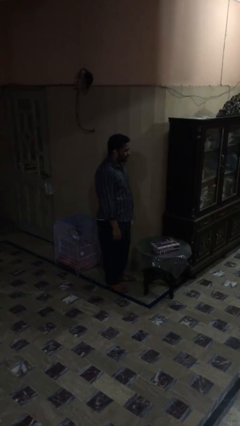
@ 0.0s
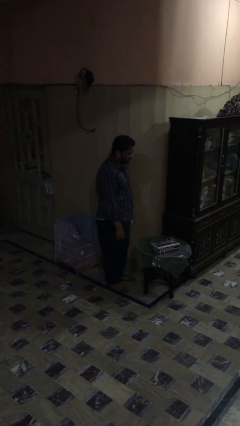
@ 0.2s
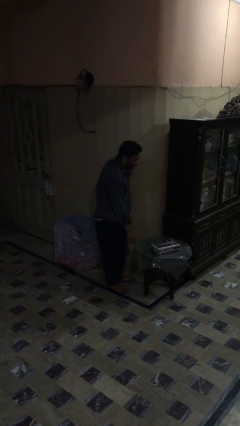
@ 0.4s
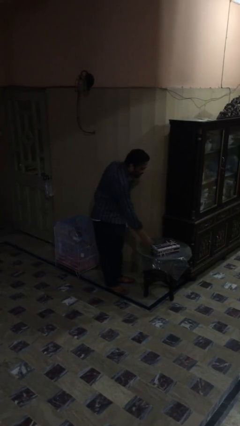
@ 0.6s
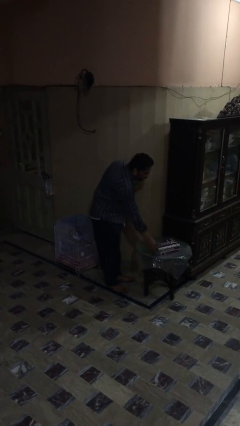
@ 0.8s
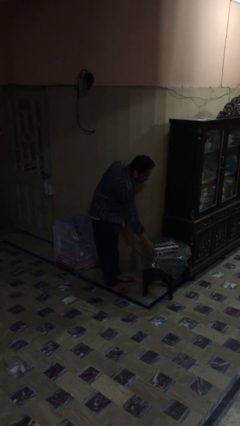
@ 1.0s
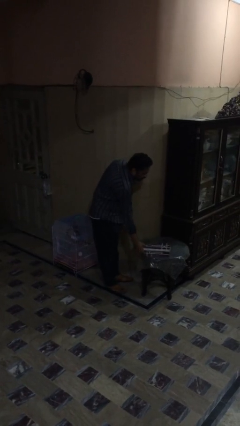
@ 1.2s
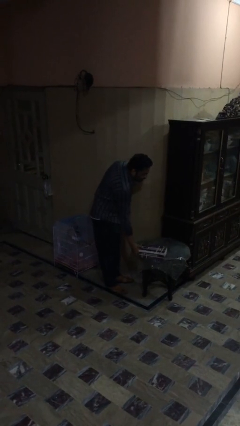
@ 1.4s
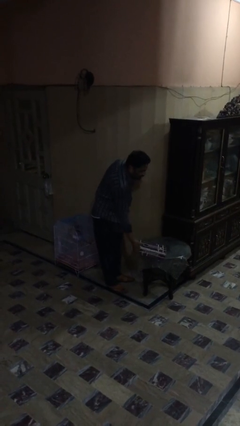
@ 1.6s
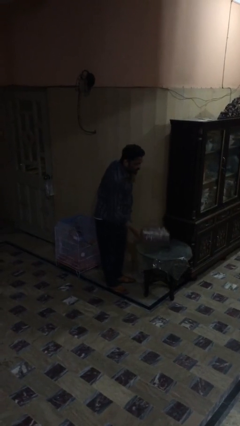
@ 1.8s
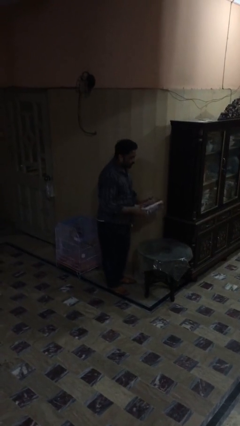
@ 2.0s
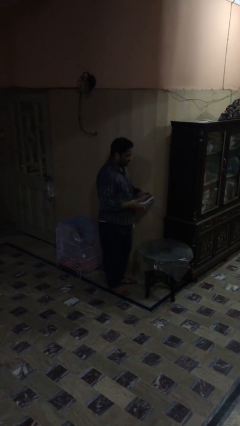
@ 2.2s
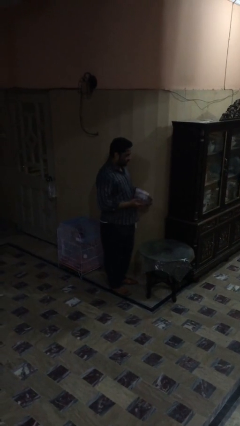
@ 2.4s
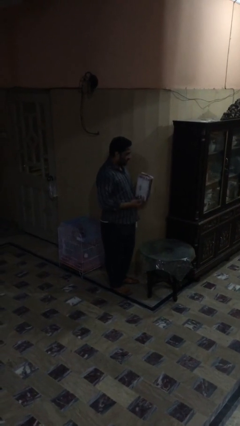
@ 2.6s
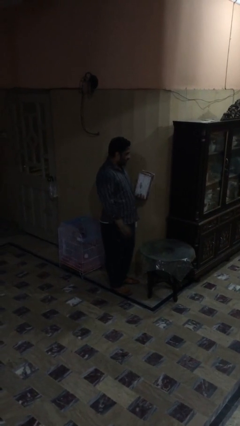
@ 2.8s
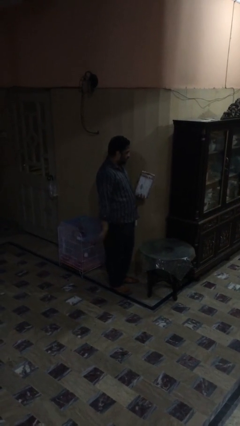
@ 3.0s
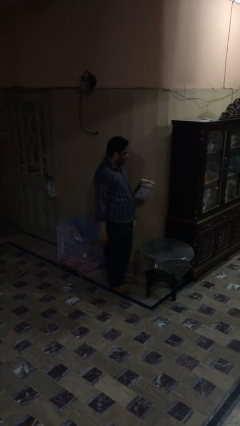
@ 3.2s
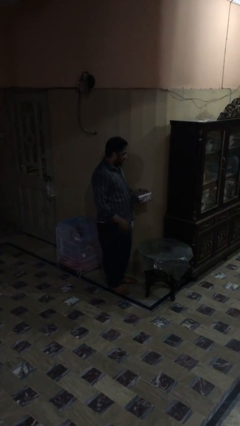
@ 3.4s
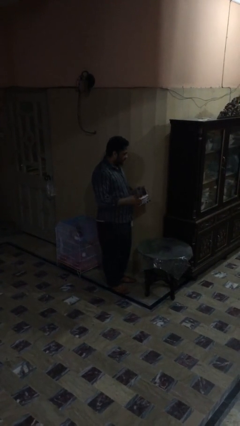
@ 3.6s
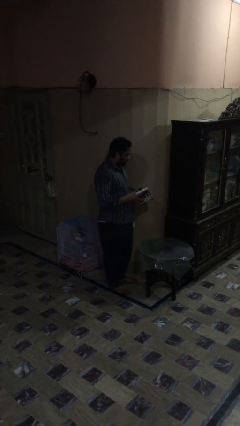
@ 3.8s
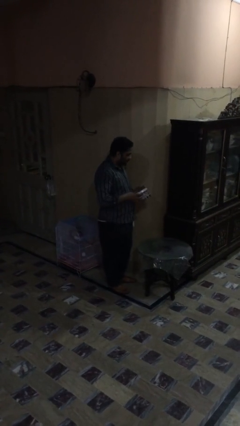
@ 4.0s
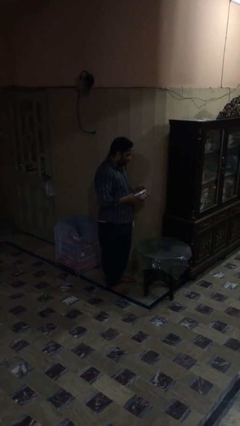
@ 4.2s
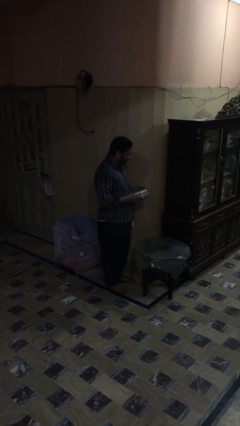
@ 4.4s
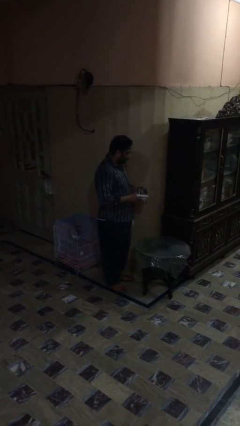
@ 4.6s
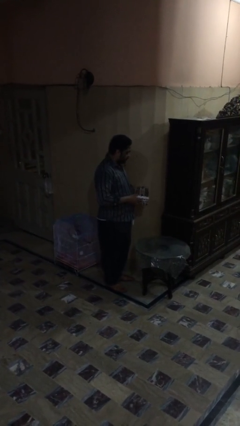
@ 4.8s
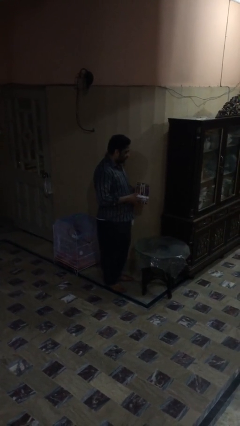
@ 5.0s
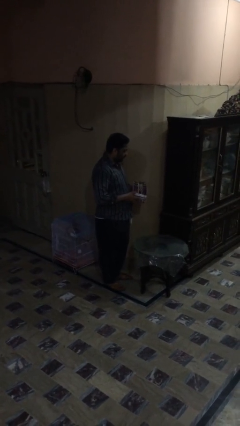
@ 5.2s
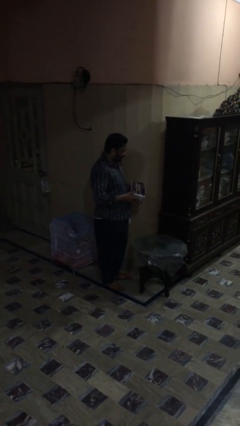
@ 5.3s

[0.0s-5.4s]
person picks up object from table

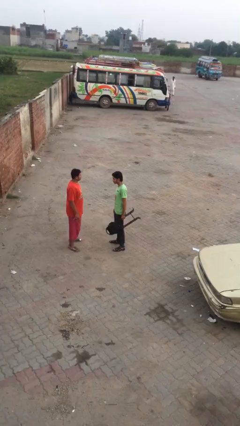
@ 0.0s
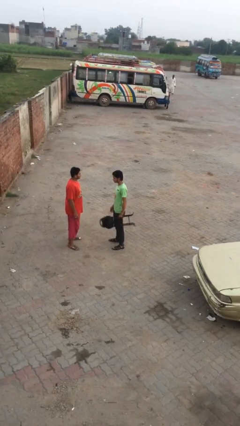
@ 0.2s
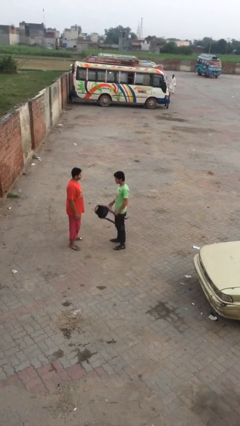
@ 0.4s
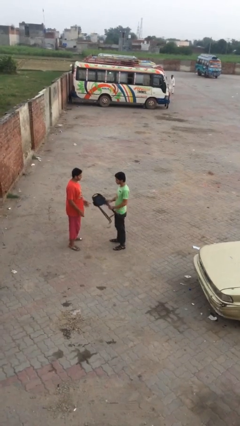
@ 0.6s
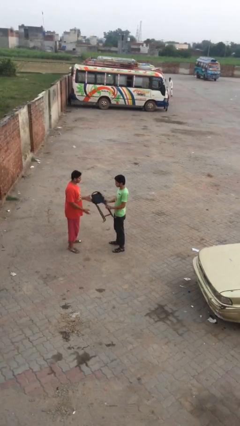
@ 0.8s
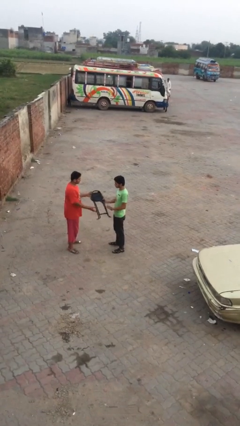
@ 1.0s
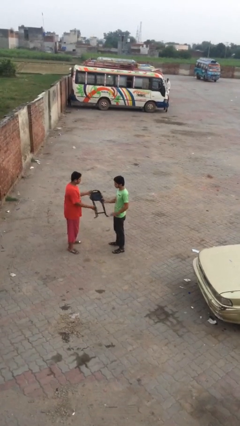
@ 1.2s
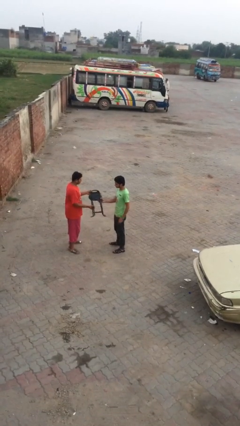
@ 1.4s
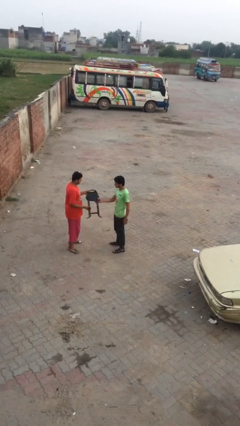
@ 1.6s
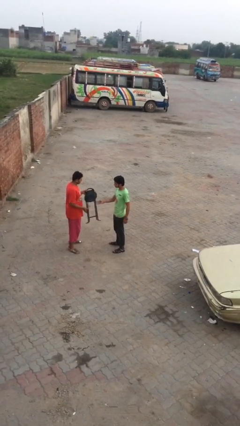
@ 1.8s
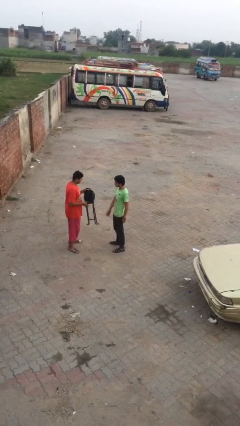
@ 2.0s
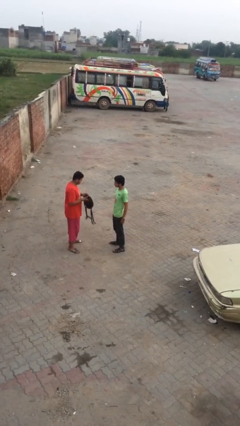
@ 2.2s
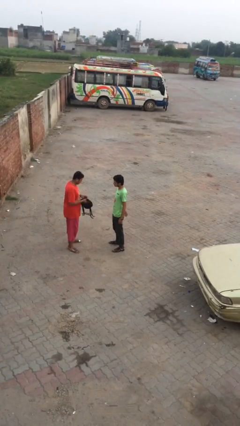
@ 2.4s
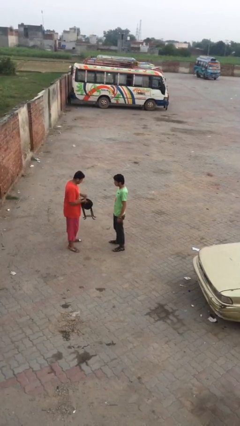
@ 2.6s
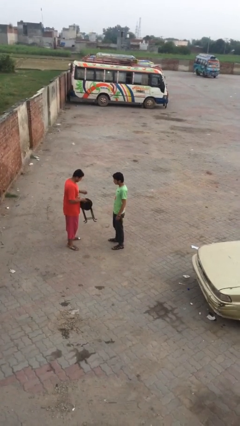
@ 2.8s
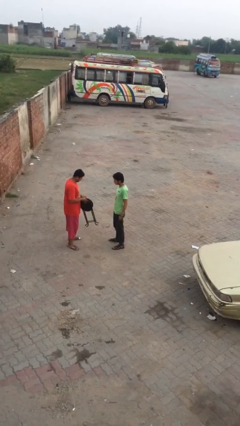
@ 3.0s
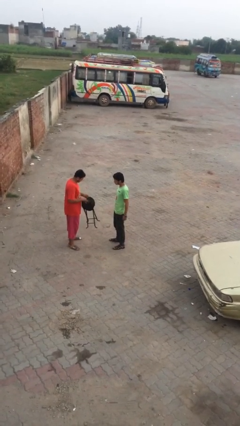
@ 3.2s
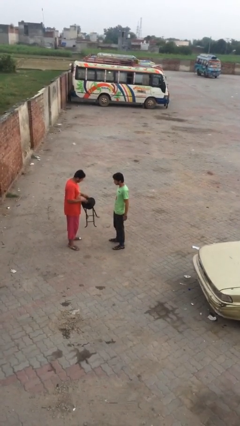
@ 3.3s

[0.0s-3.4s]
person transfers object to person

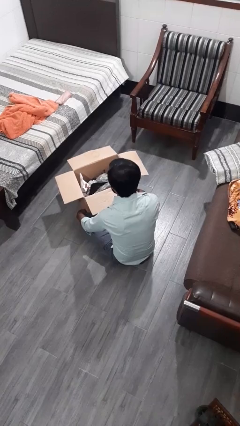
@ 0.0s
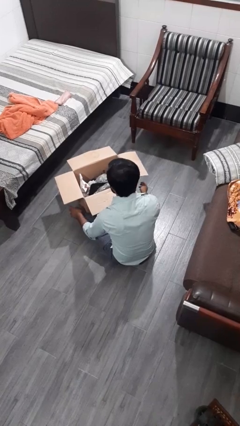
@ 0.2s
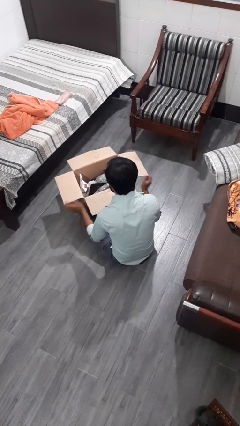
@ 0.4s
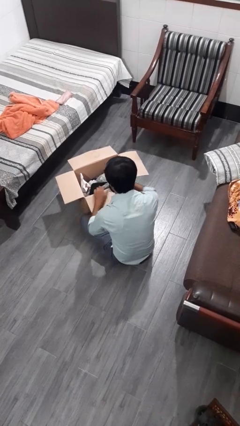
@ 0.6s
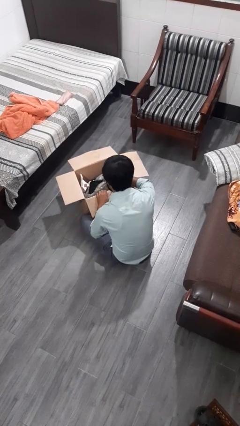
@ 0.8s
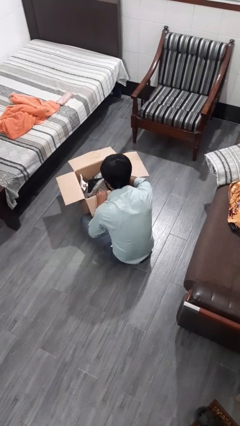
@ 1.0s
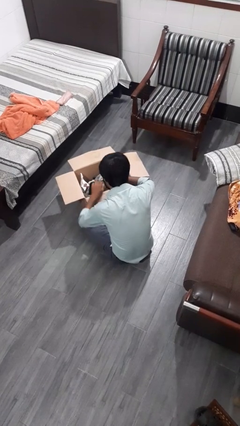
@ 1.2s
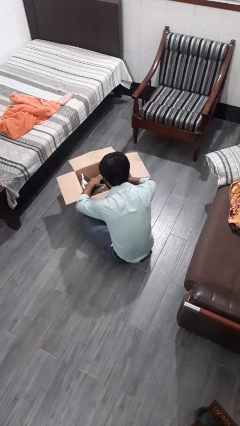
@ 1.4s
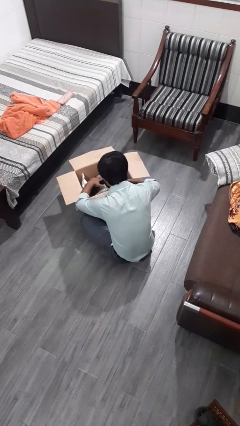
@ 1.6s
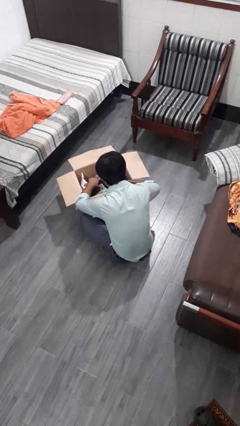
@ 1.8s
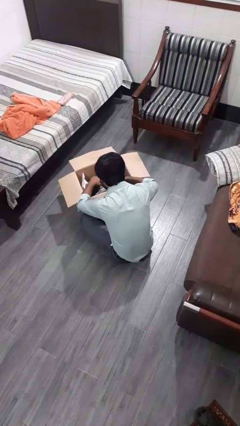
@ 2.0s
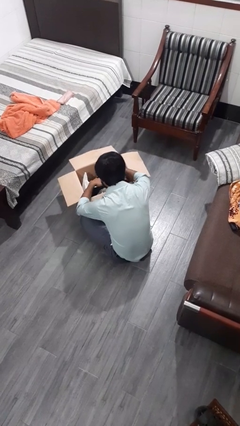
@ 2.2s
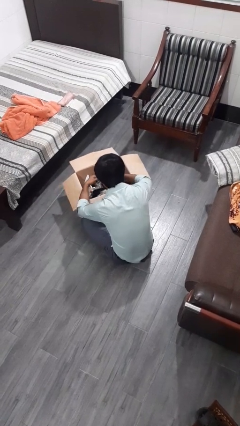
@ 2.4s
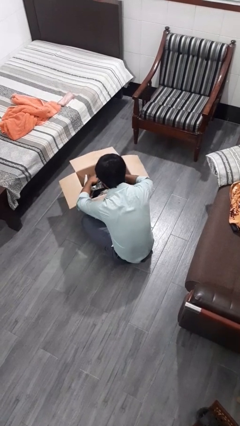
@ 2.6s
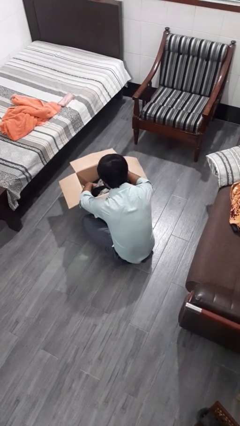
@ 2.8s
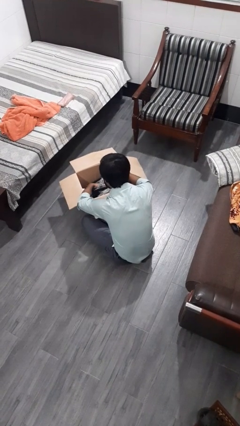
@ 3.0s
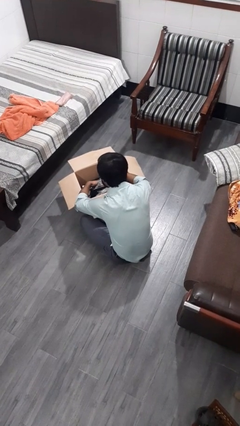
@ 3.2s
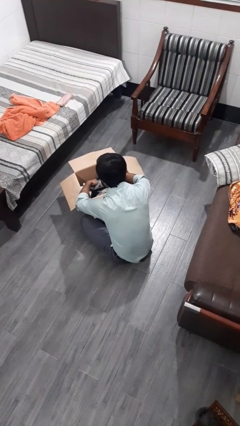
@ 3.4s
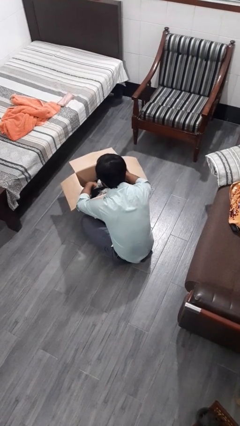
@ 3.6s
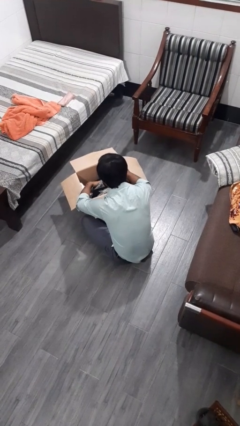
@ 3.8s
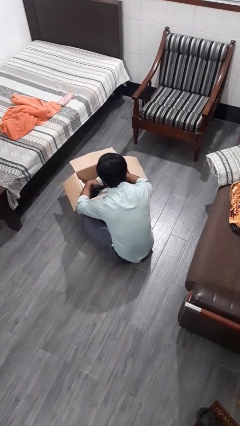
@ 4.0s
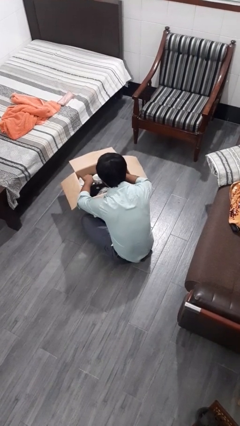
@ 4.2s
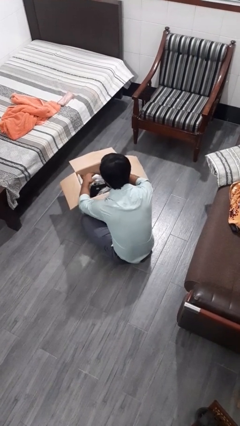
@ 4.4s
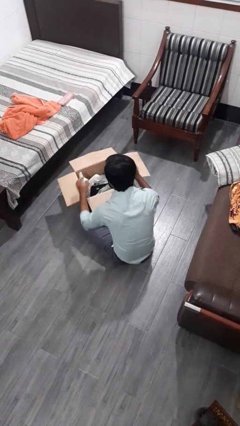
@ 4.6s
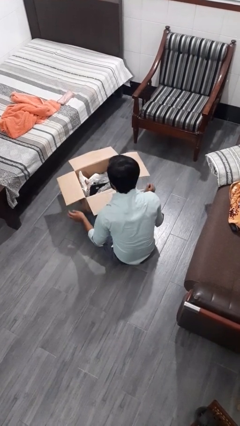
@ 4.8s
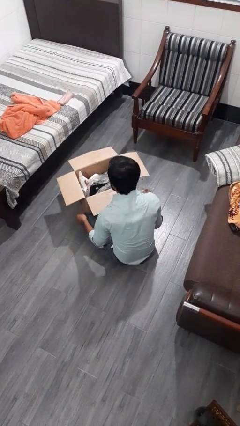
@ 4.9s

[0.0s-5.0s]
person searches in box

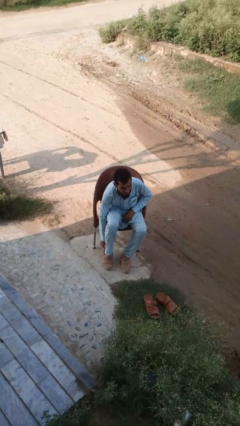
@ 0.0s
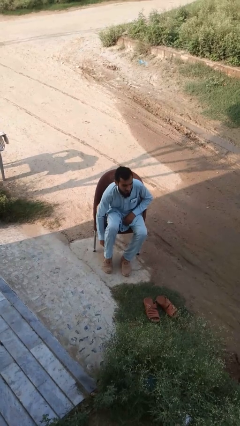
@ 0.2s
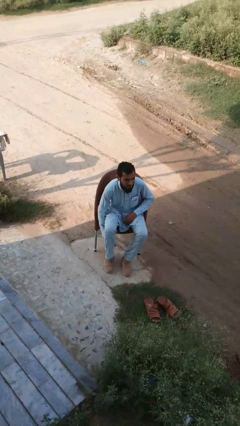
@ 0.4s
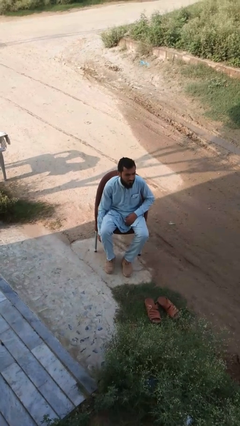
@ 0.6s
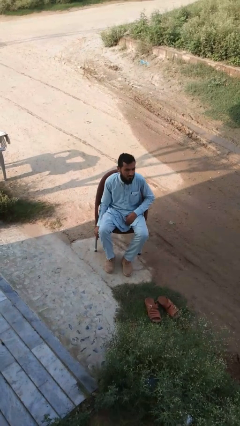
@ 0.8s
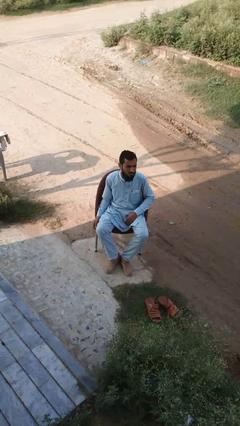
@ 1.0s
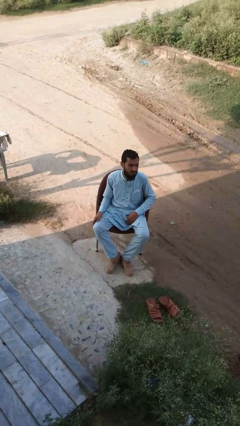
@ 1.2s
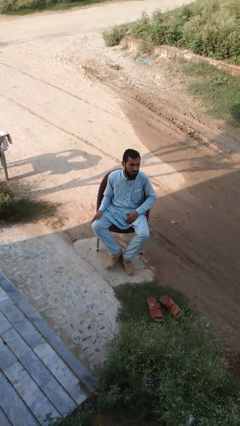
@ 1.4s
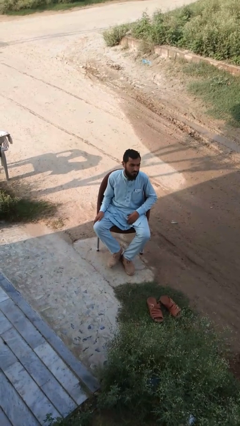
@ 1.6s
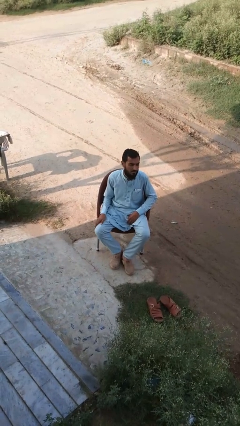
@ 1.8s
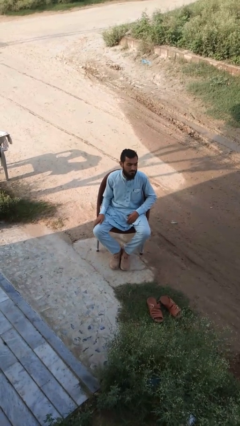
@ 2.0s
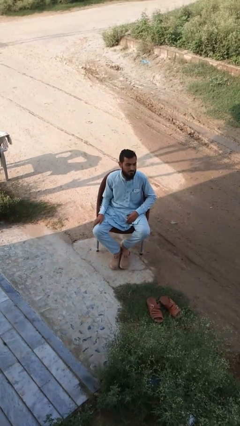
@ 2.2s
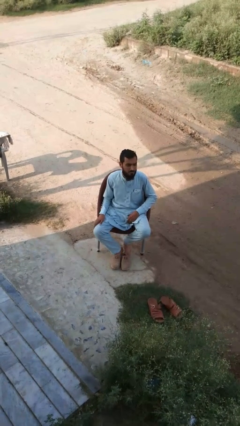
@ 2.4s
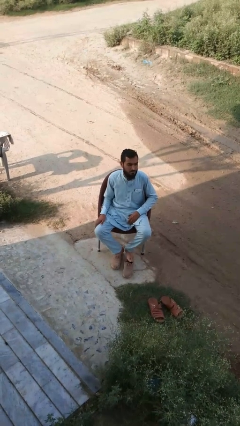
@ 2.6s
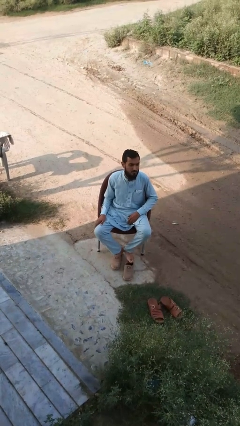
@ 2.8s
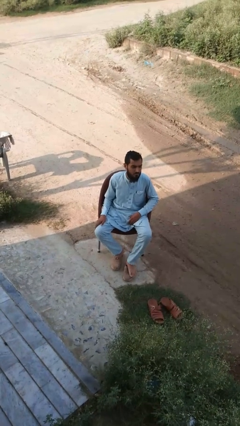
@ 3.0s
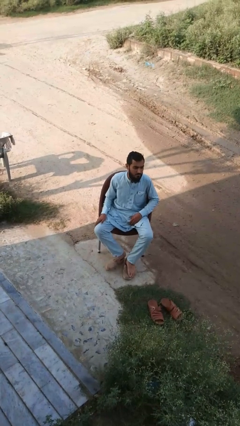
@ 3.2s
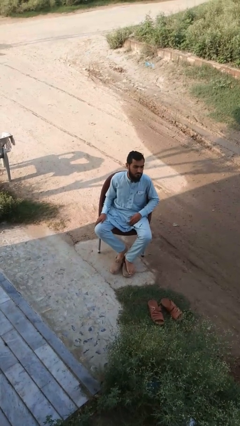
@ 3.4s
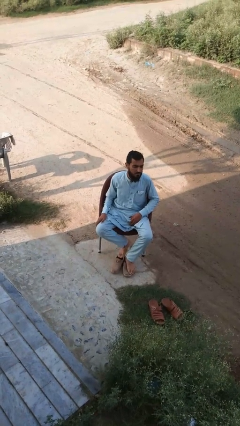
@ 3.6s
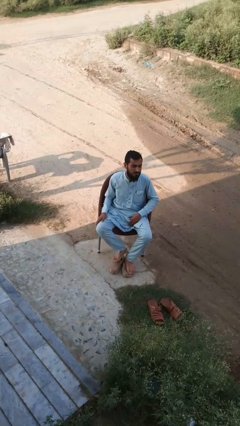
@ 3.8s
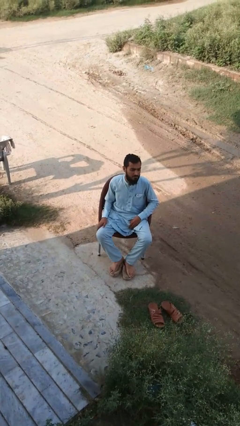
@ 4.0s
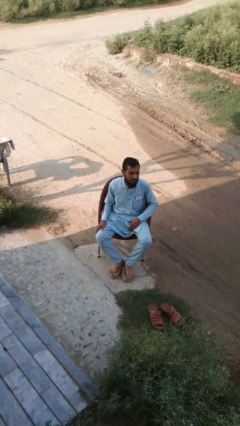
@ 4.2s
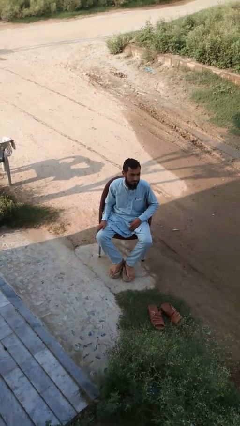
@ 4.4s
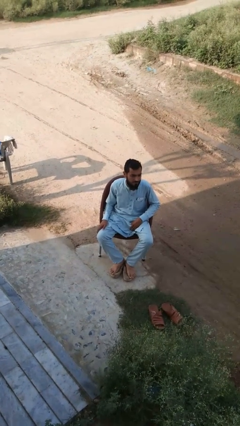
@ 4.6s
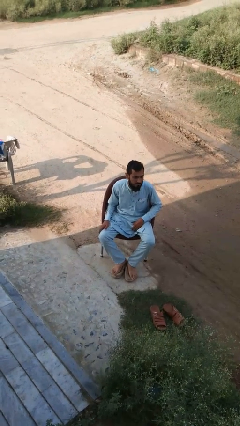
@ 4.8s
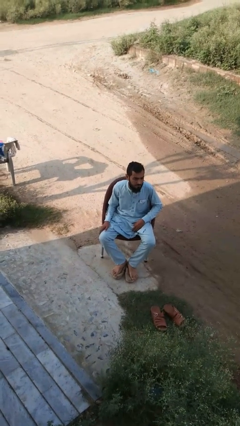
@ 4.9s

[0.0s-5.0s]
person takes off shoes
